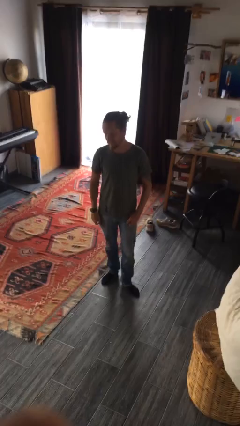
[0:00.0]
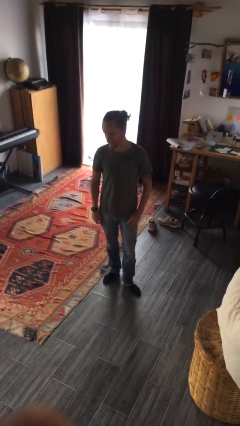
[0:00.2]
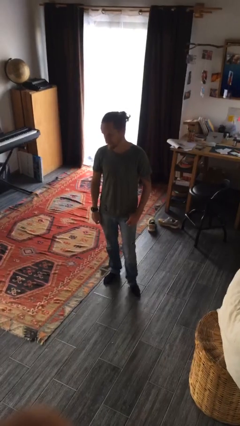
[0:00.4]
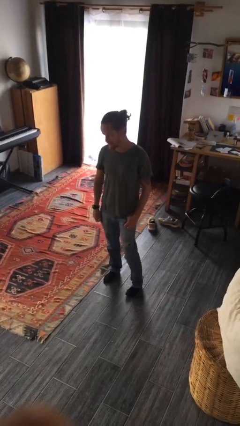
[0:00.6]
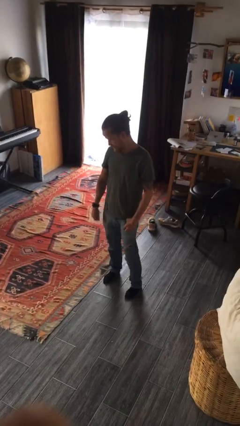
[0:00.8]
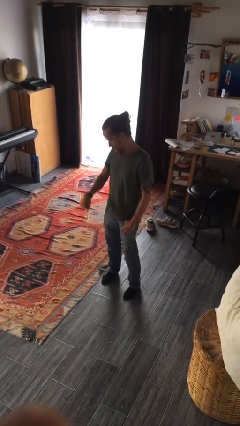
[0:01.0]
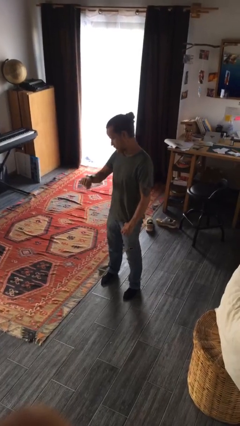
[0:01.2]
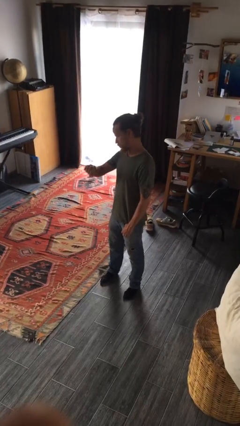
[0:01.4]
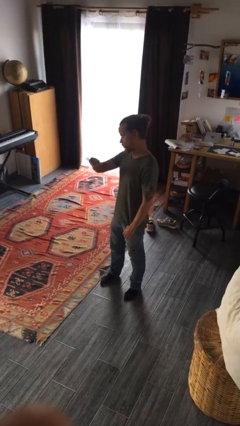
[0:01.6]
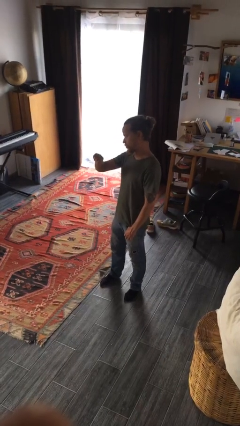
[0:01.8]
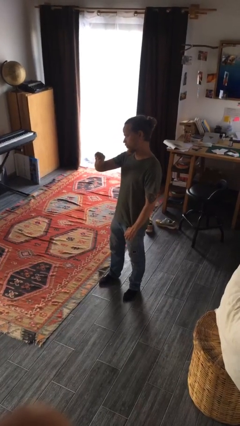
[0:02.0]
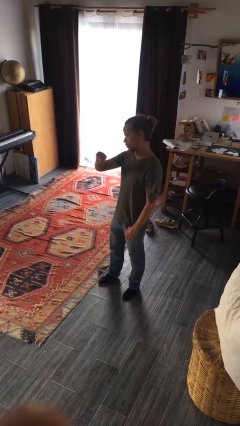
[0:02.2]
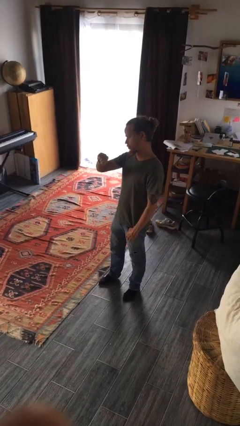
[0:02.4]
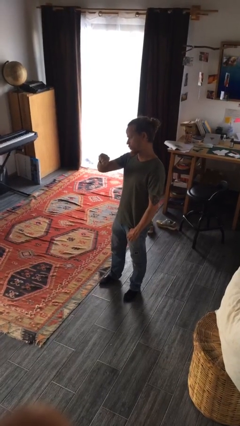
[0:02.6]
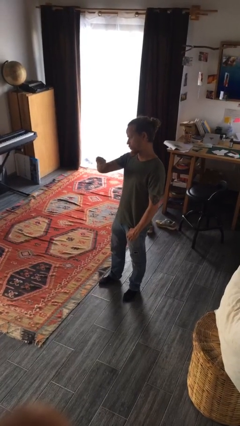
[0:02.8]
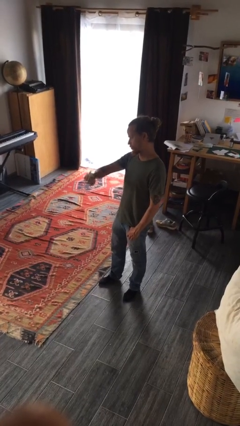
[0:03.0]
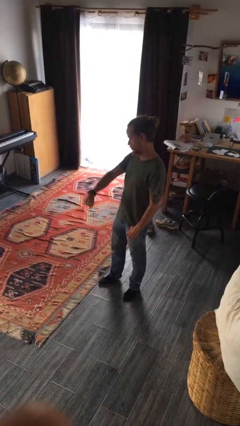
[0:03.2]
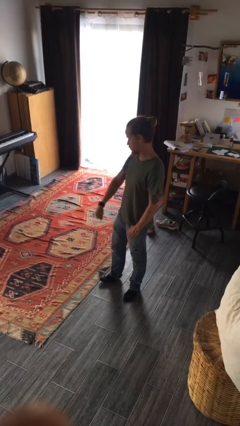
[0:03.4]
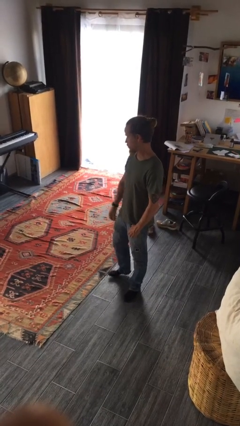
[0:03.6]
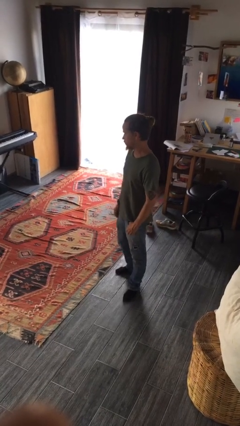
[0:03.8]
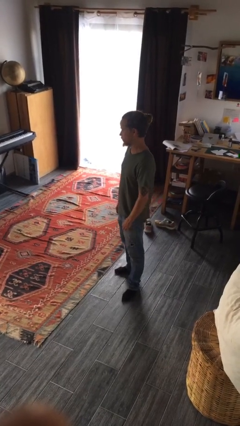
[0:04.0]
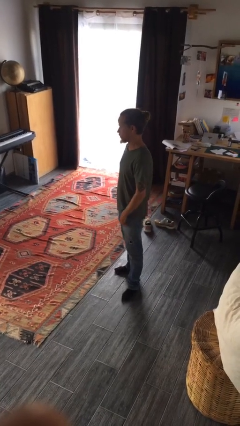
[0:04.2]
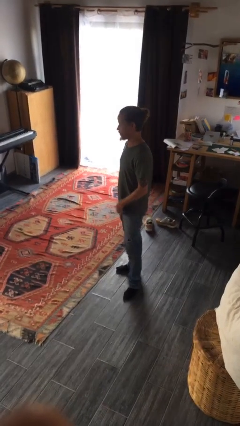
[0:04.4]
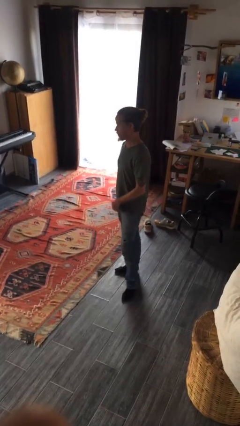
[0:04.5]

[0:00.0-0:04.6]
person looks at wristwatch

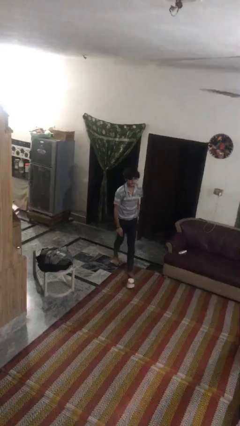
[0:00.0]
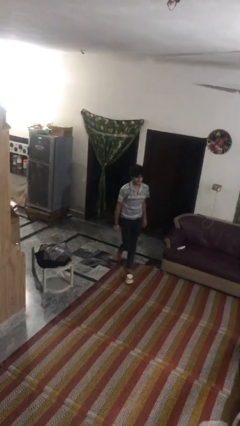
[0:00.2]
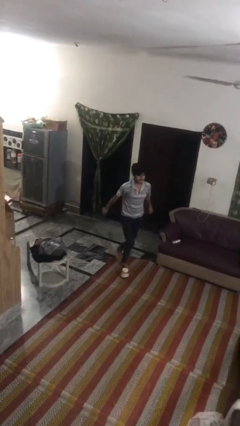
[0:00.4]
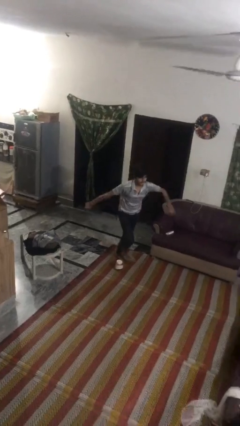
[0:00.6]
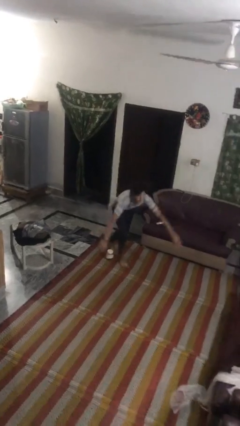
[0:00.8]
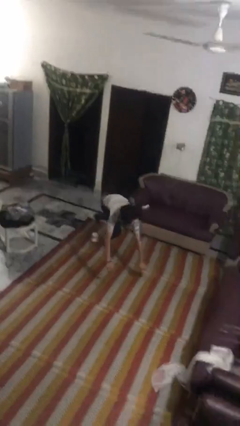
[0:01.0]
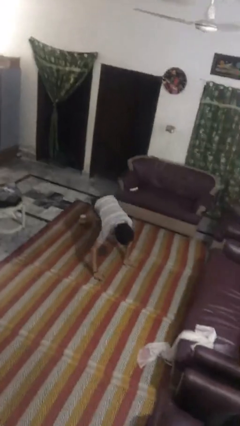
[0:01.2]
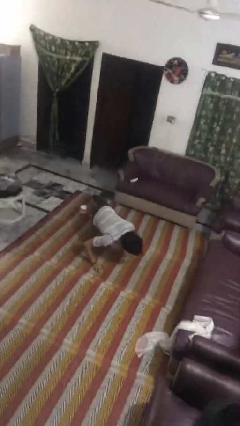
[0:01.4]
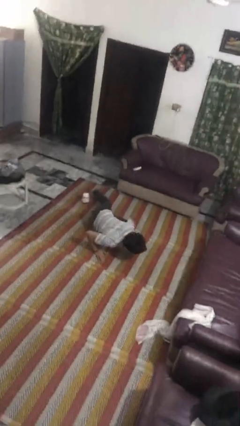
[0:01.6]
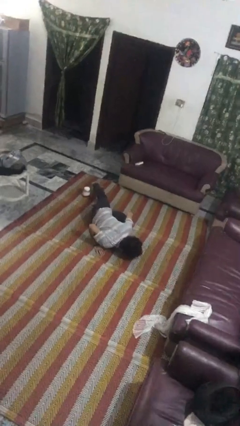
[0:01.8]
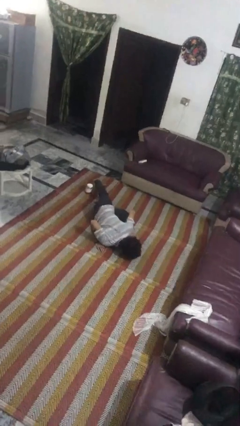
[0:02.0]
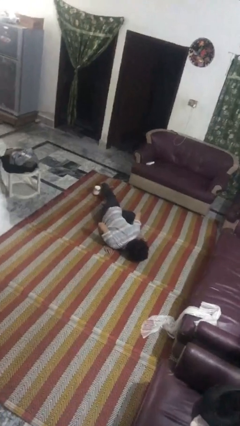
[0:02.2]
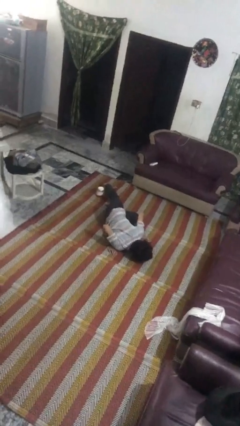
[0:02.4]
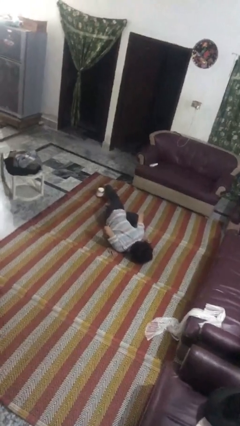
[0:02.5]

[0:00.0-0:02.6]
person trips on object on floor

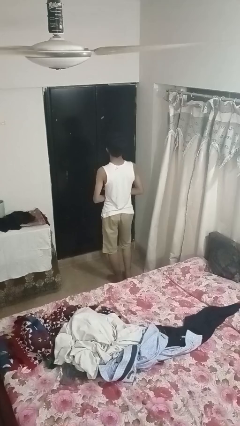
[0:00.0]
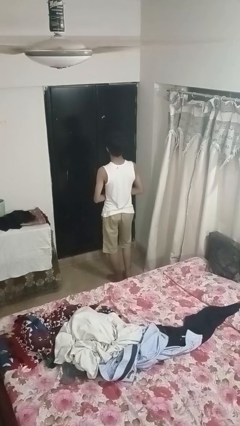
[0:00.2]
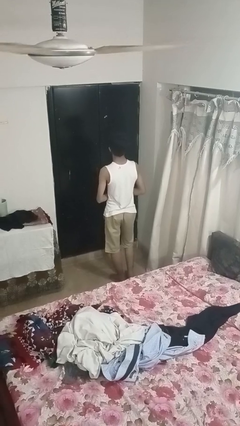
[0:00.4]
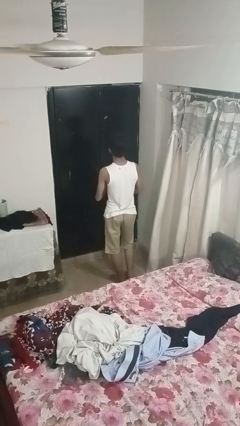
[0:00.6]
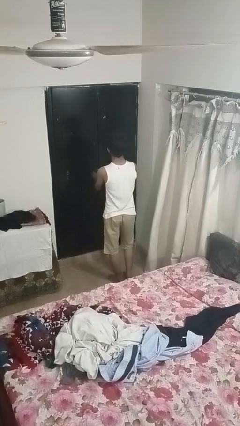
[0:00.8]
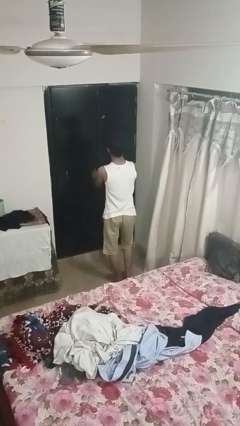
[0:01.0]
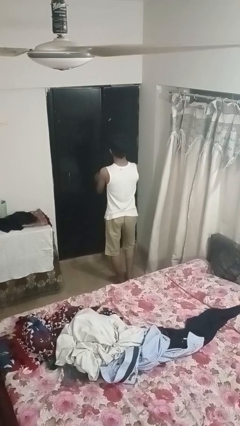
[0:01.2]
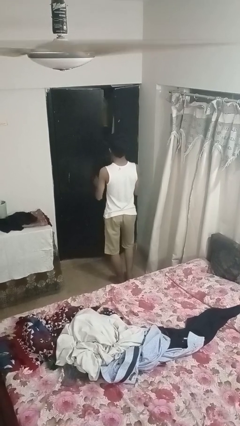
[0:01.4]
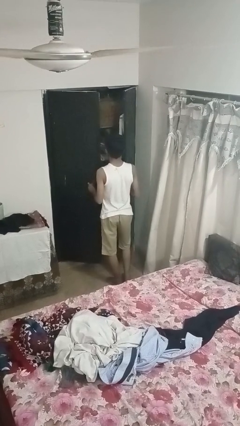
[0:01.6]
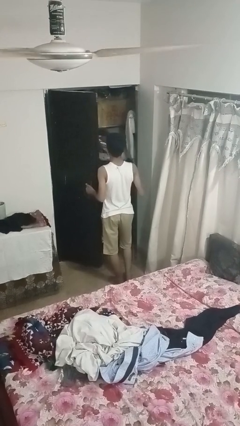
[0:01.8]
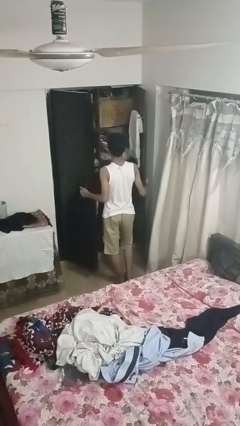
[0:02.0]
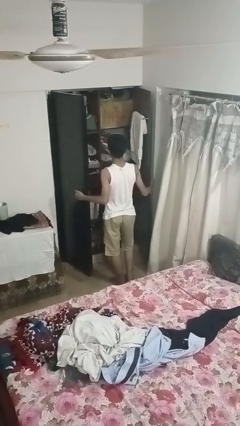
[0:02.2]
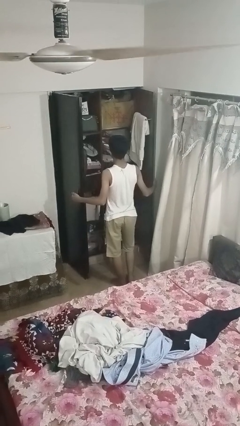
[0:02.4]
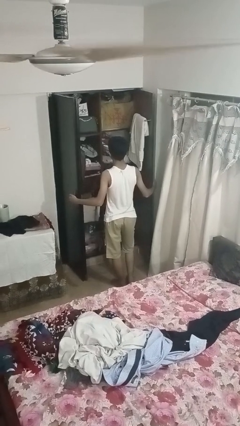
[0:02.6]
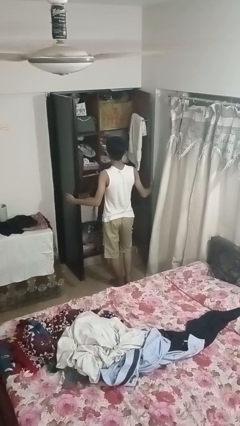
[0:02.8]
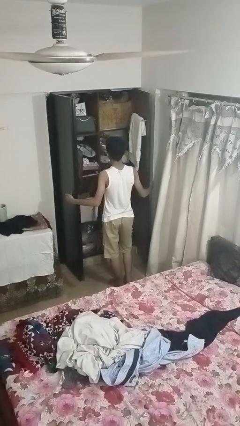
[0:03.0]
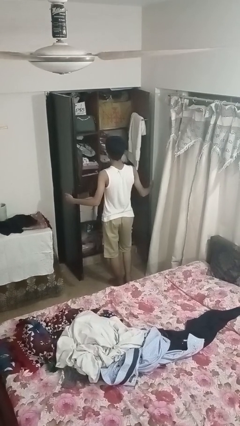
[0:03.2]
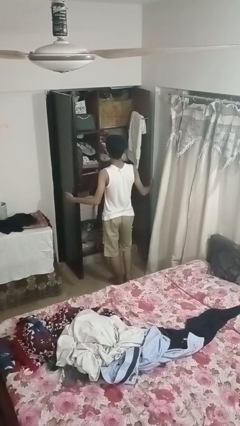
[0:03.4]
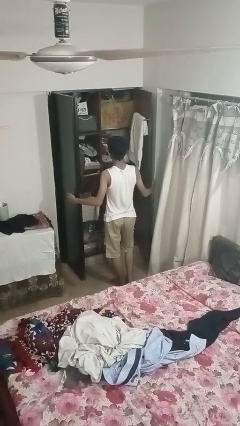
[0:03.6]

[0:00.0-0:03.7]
person opens closet door

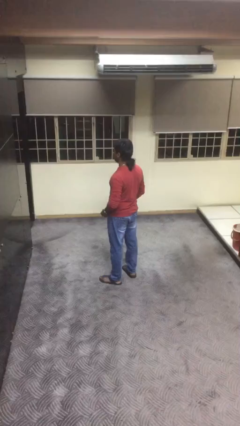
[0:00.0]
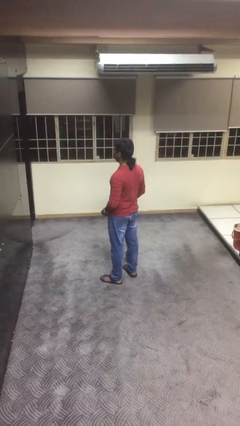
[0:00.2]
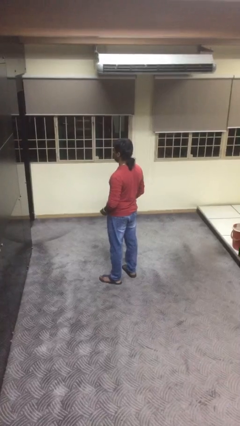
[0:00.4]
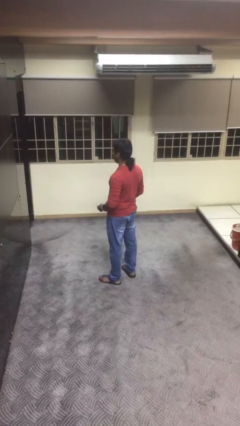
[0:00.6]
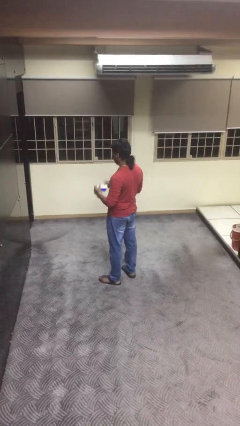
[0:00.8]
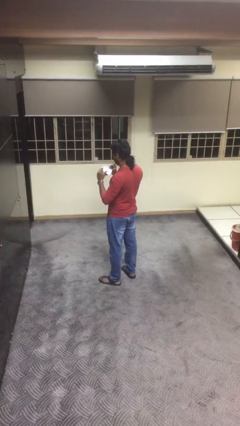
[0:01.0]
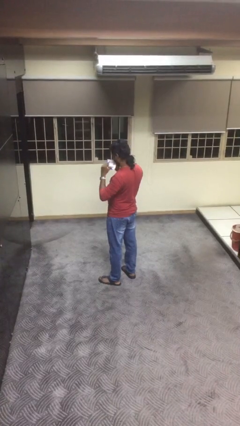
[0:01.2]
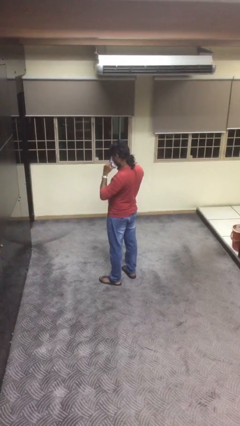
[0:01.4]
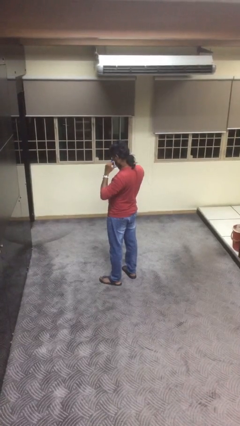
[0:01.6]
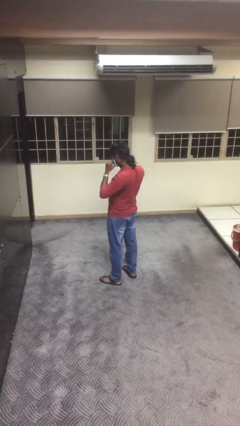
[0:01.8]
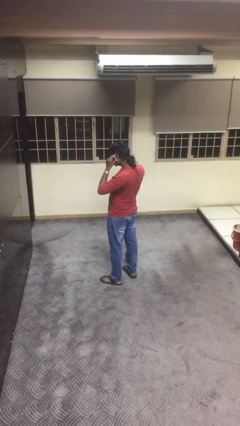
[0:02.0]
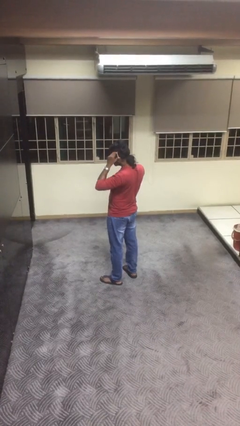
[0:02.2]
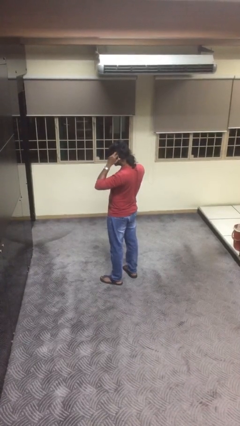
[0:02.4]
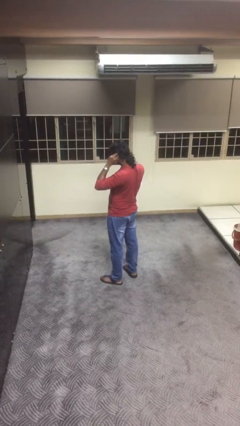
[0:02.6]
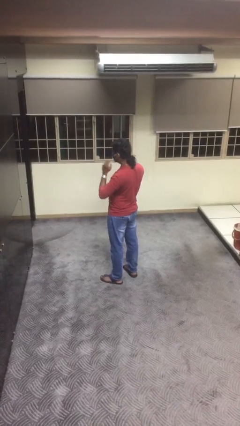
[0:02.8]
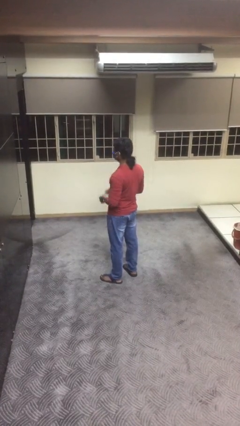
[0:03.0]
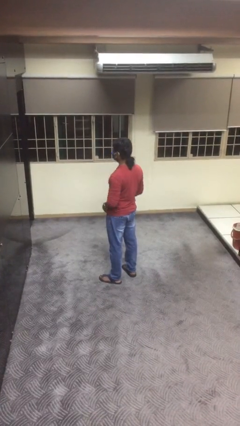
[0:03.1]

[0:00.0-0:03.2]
person puts on facemask

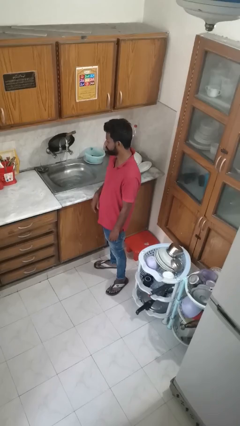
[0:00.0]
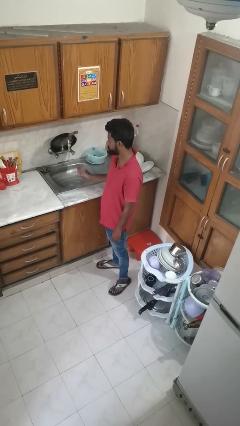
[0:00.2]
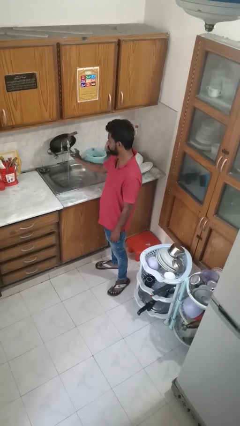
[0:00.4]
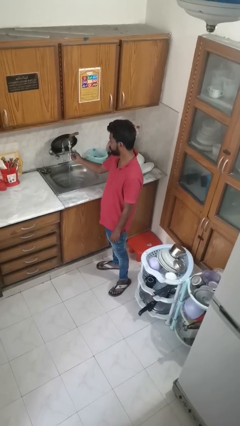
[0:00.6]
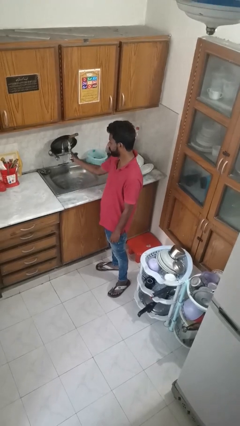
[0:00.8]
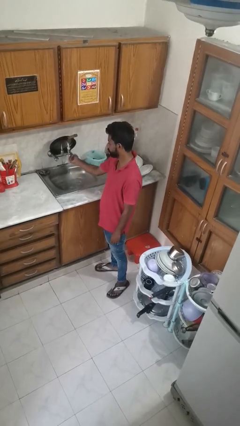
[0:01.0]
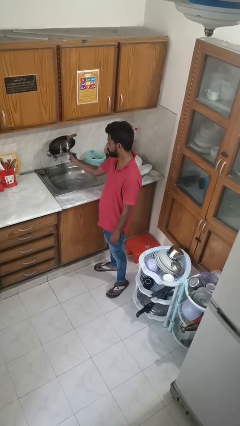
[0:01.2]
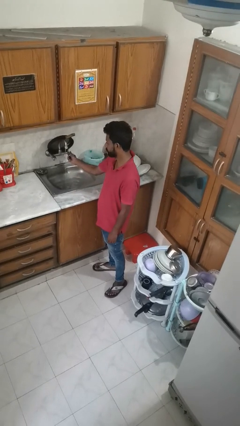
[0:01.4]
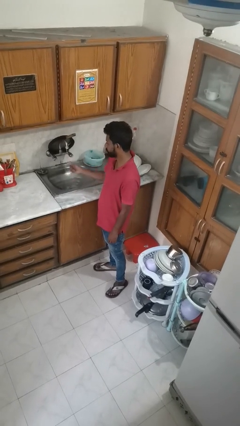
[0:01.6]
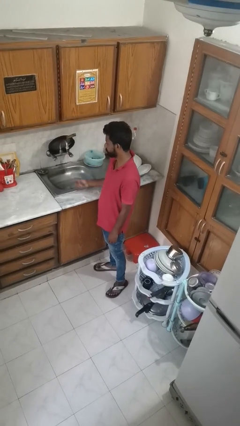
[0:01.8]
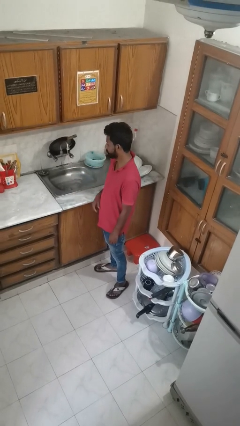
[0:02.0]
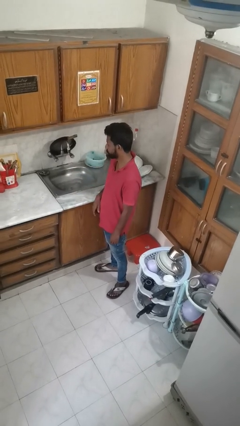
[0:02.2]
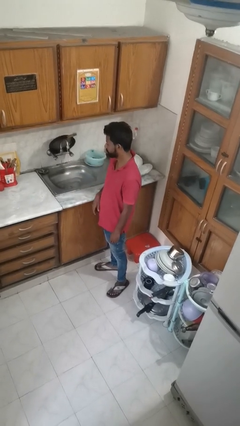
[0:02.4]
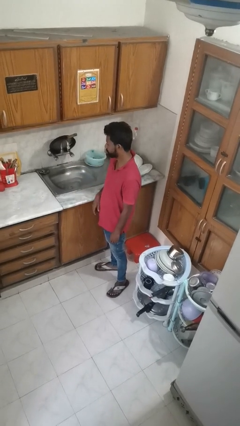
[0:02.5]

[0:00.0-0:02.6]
person turns off faucet

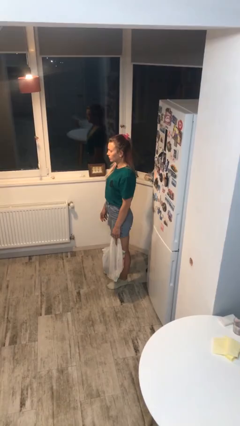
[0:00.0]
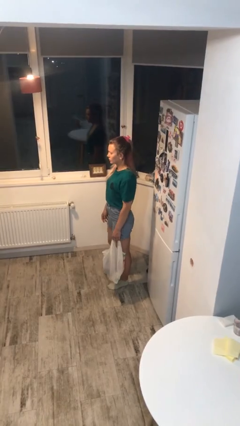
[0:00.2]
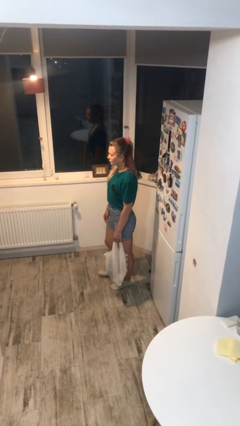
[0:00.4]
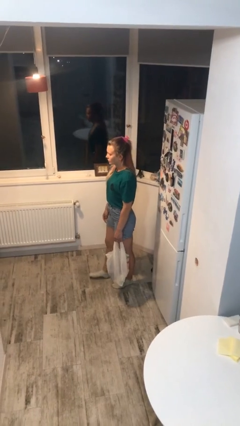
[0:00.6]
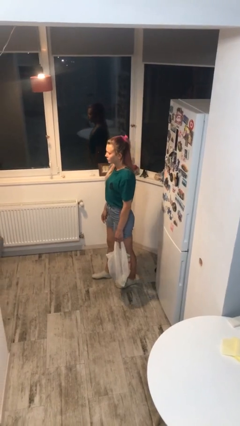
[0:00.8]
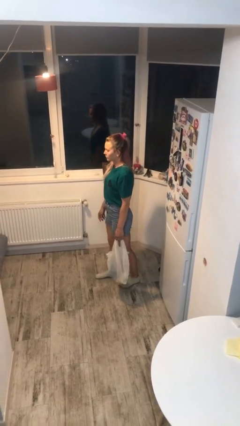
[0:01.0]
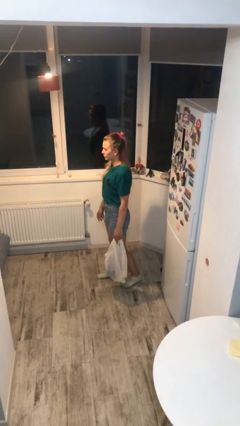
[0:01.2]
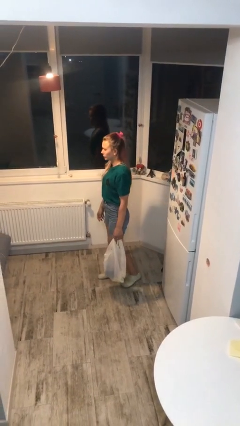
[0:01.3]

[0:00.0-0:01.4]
person carries groceries
